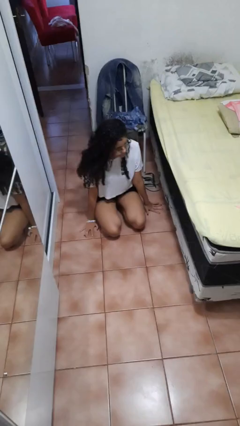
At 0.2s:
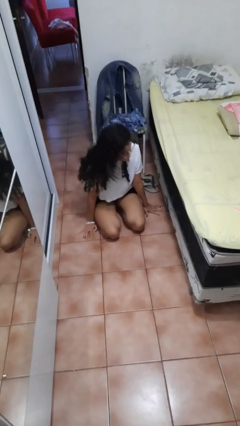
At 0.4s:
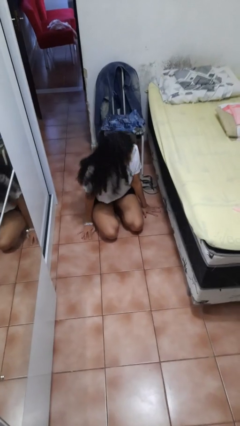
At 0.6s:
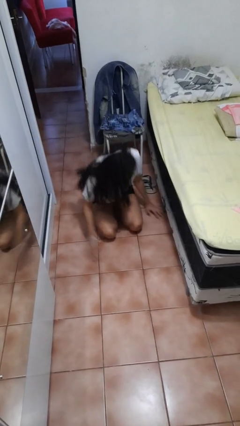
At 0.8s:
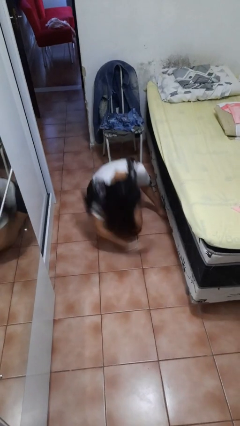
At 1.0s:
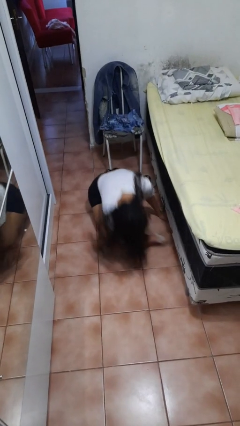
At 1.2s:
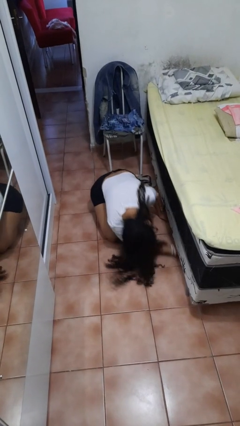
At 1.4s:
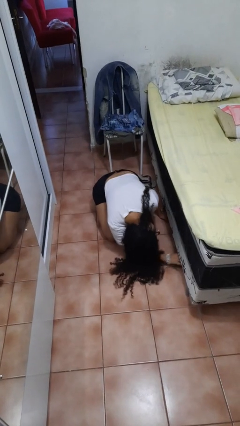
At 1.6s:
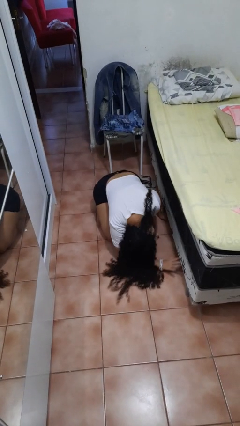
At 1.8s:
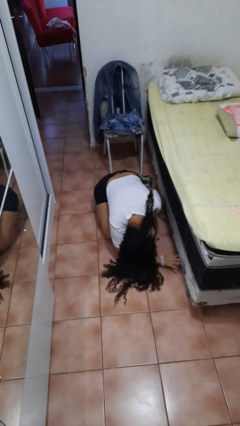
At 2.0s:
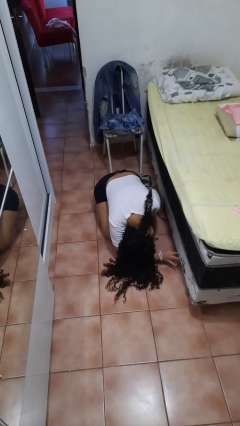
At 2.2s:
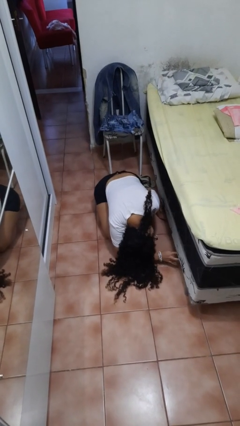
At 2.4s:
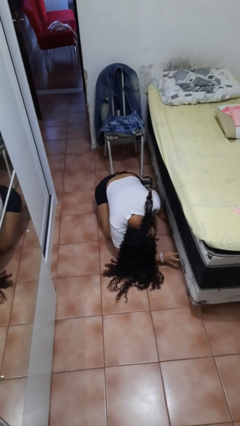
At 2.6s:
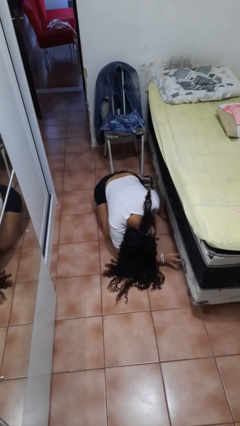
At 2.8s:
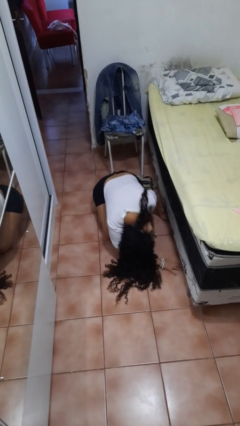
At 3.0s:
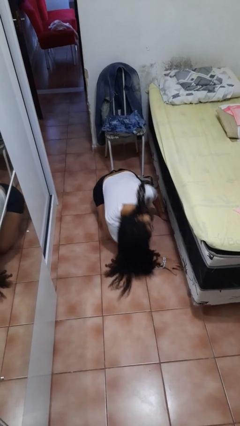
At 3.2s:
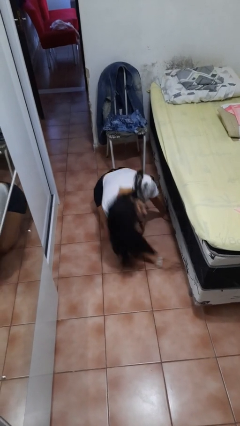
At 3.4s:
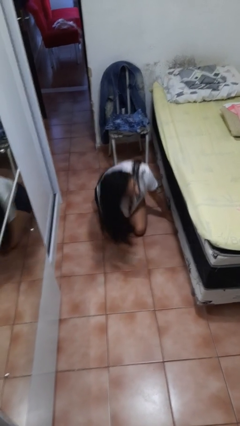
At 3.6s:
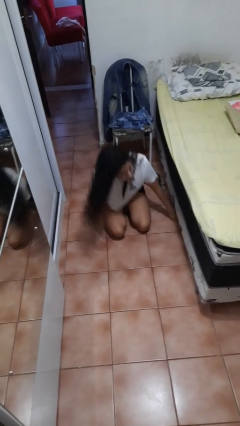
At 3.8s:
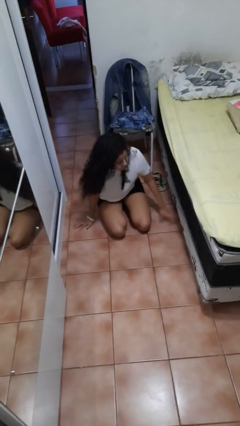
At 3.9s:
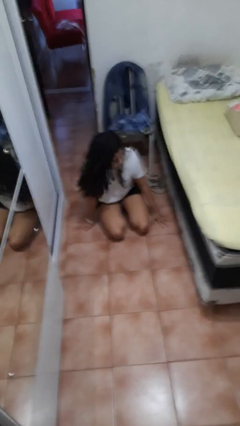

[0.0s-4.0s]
person searches under bed

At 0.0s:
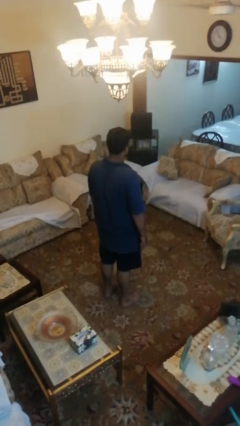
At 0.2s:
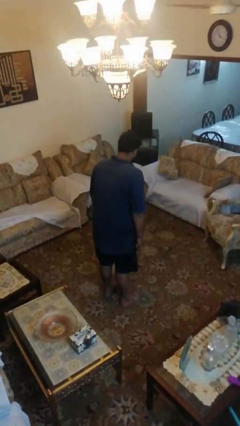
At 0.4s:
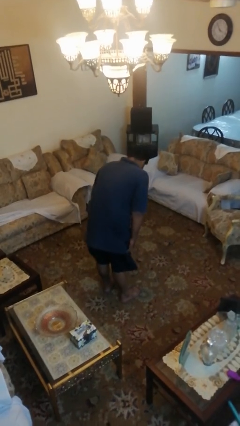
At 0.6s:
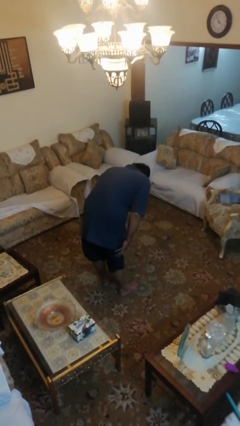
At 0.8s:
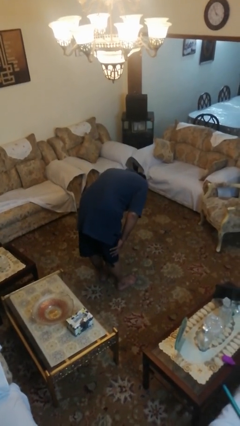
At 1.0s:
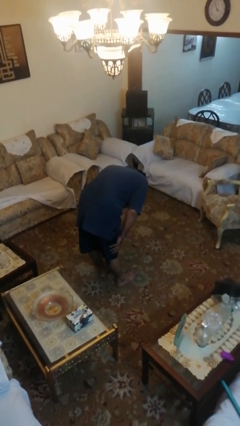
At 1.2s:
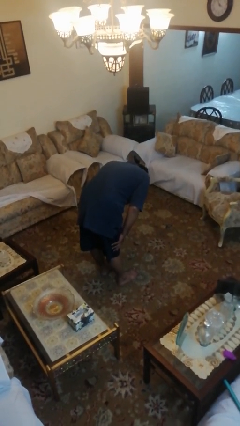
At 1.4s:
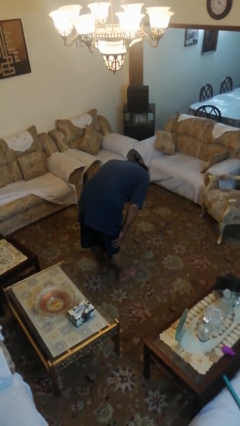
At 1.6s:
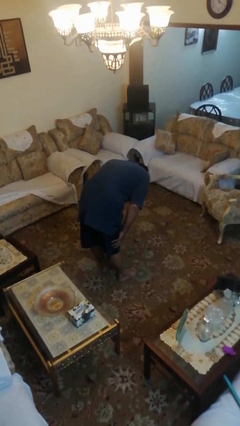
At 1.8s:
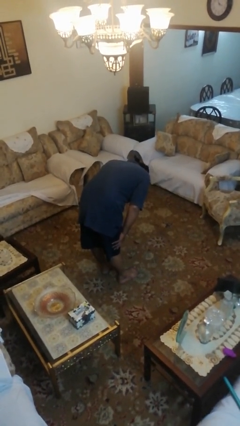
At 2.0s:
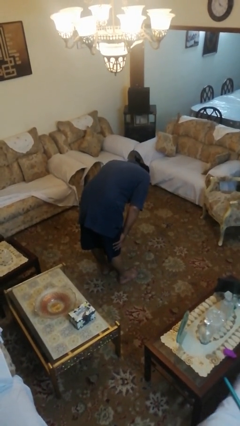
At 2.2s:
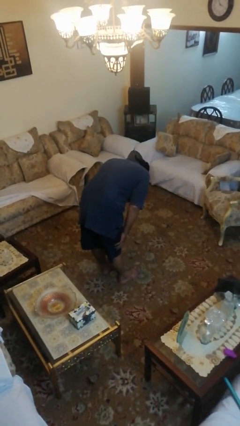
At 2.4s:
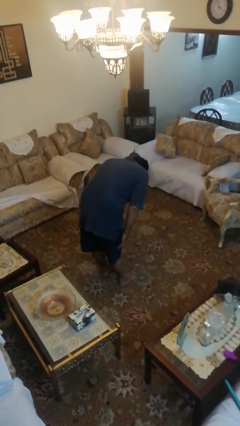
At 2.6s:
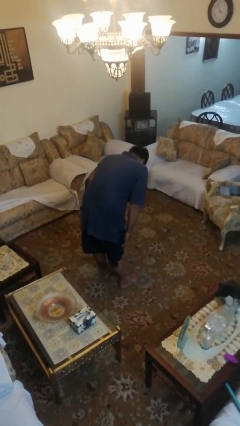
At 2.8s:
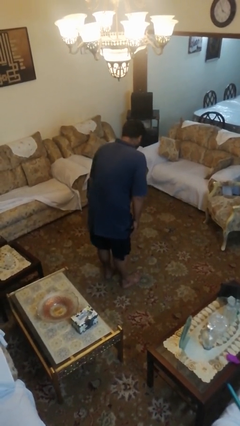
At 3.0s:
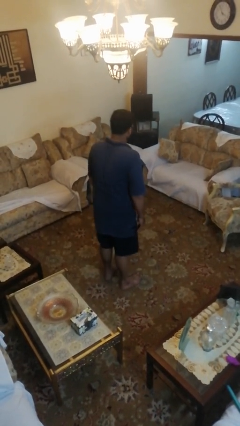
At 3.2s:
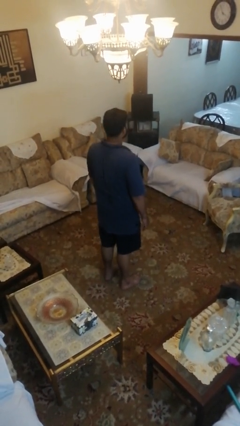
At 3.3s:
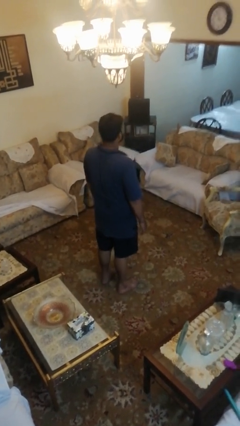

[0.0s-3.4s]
person bows

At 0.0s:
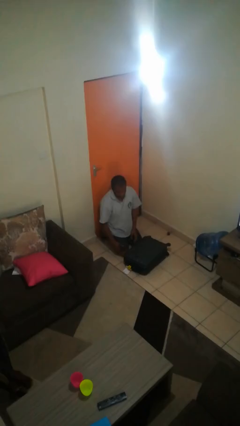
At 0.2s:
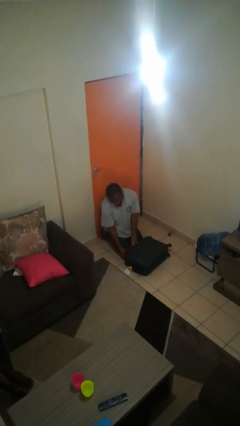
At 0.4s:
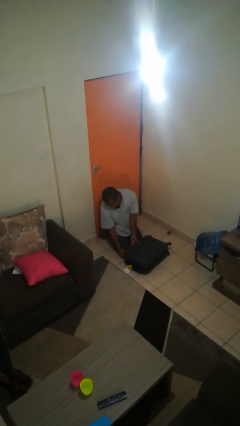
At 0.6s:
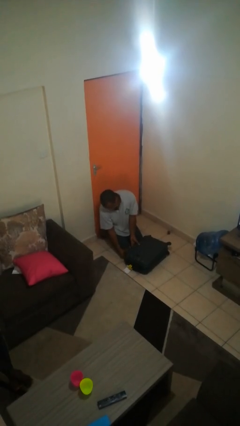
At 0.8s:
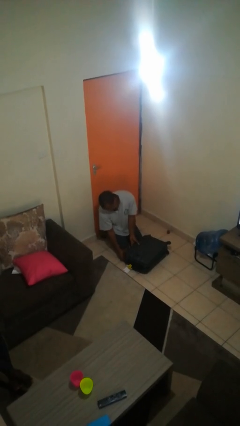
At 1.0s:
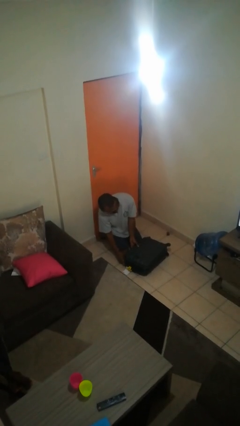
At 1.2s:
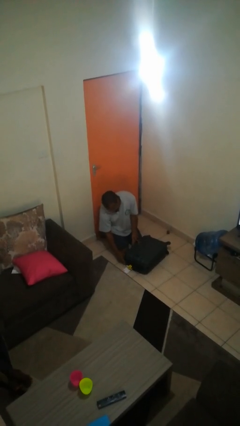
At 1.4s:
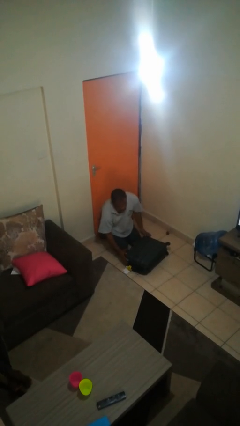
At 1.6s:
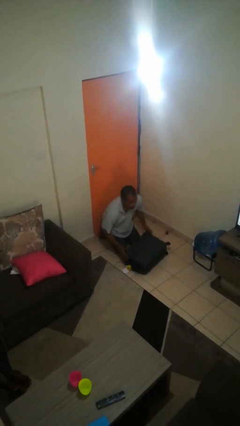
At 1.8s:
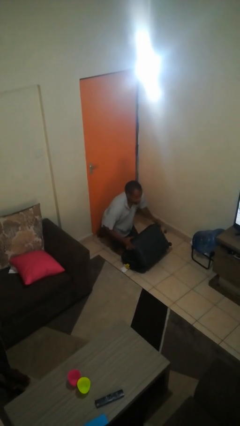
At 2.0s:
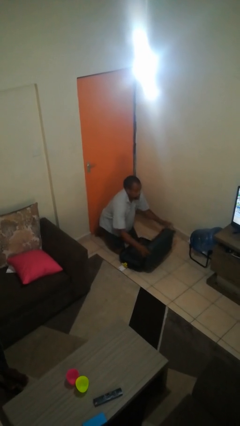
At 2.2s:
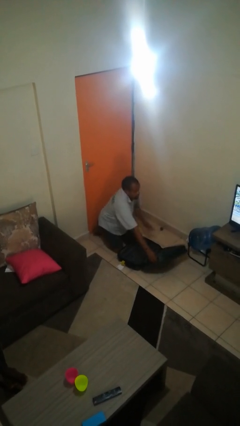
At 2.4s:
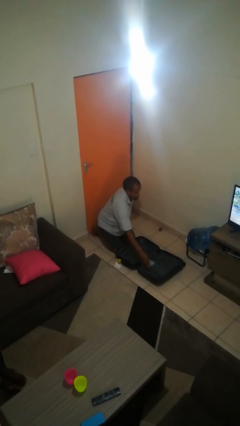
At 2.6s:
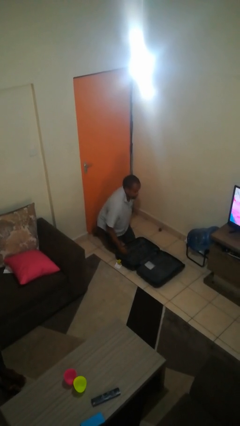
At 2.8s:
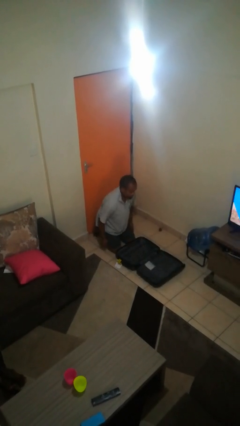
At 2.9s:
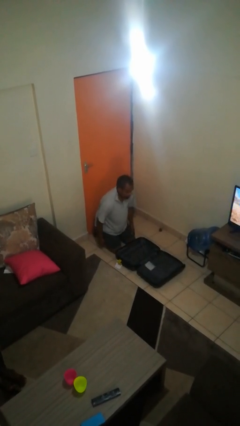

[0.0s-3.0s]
person opens suitcase

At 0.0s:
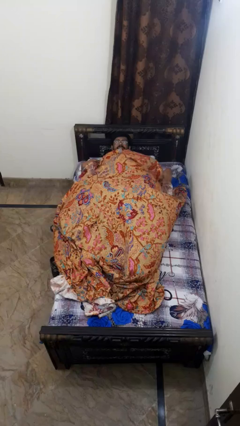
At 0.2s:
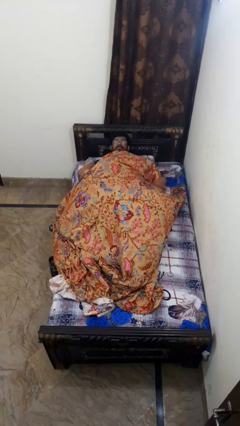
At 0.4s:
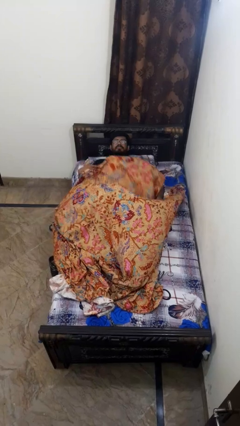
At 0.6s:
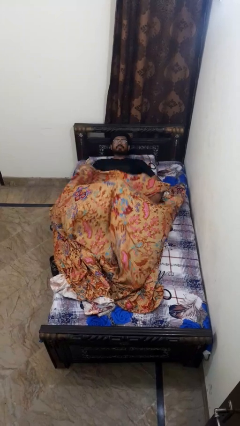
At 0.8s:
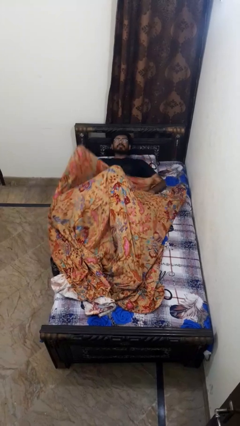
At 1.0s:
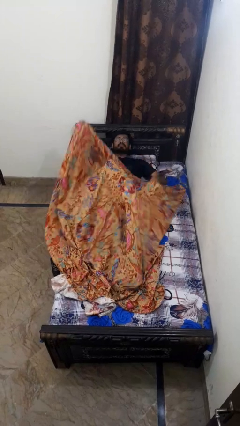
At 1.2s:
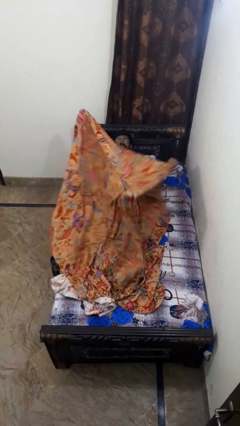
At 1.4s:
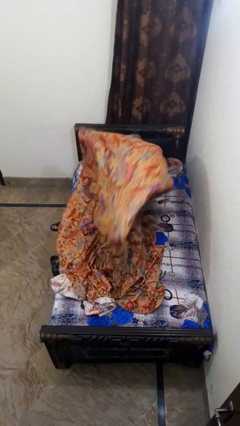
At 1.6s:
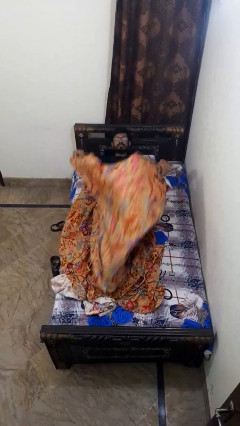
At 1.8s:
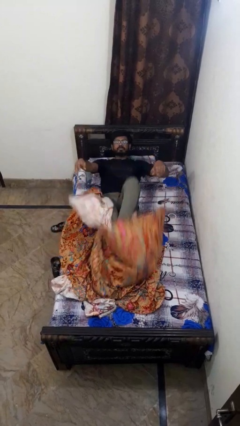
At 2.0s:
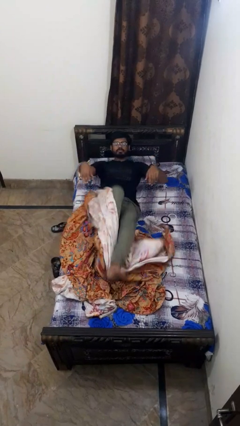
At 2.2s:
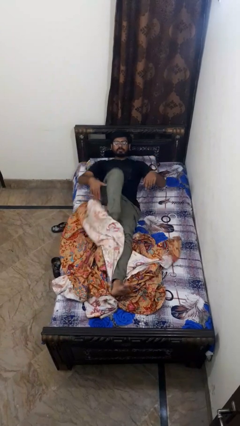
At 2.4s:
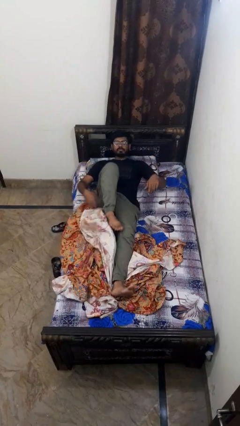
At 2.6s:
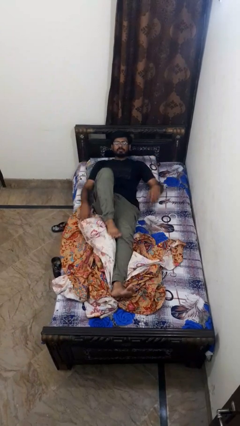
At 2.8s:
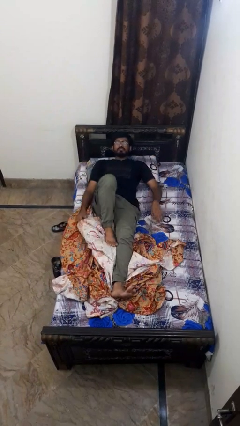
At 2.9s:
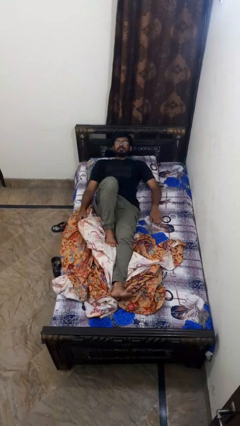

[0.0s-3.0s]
person uncovers with bedsheets

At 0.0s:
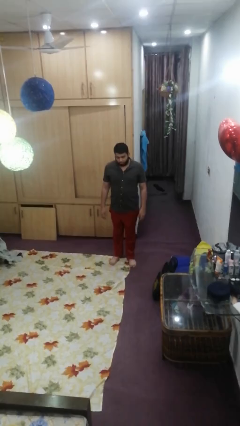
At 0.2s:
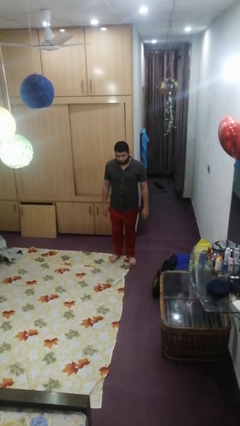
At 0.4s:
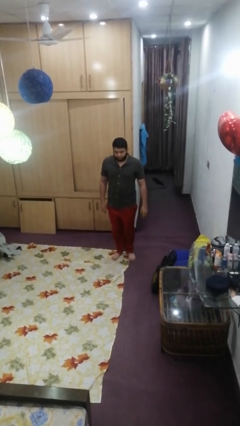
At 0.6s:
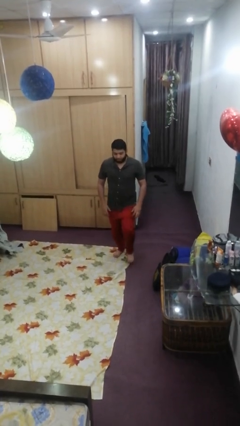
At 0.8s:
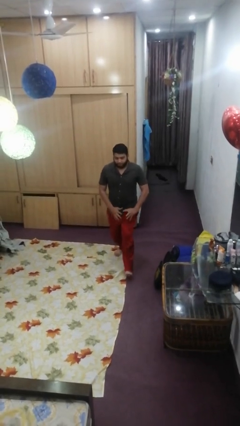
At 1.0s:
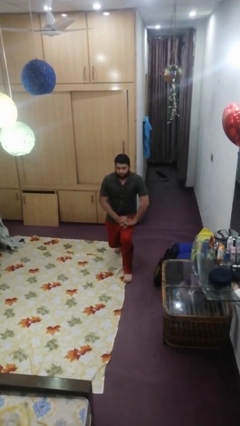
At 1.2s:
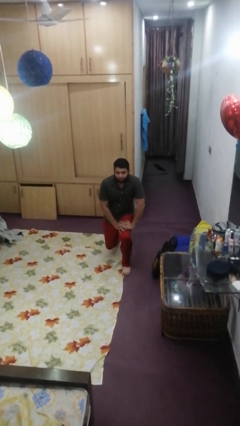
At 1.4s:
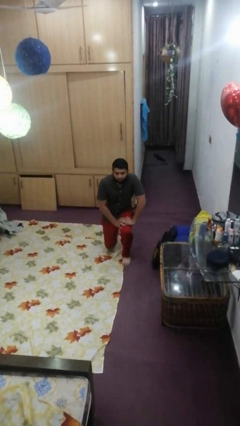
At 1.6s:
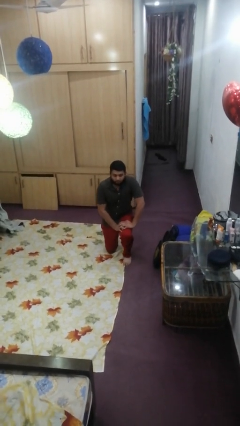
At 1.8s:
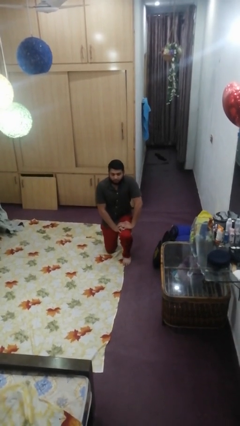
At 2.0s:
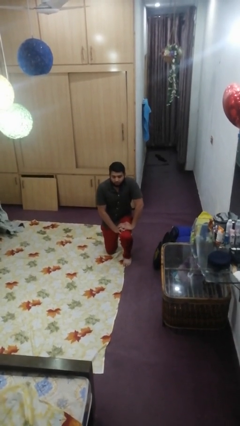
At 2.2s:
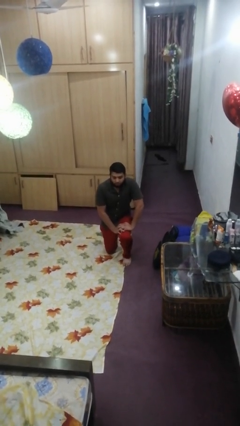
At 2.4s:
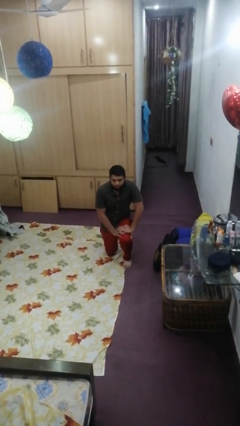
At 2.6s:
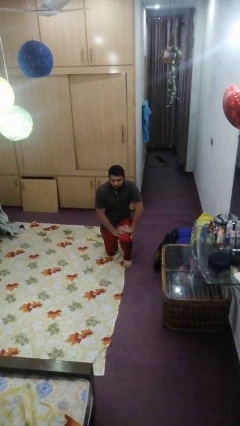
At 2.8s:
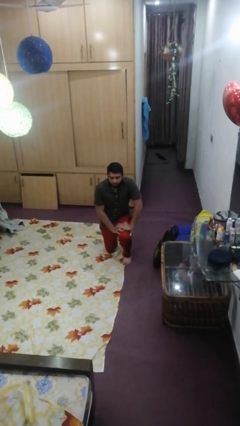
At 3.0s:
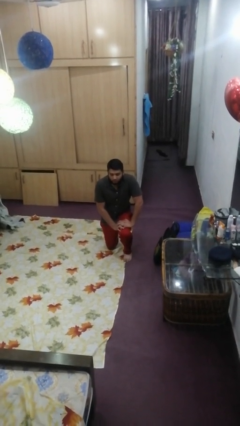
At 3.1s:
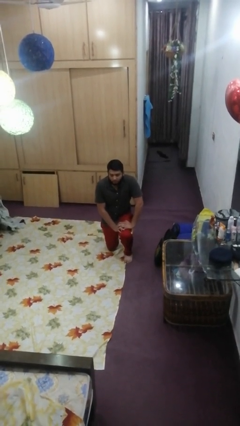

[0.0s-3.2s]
person kneels

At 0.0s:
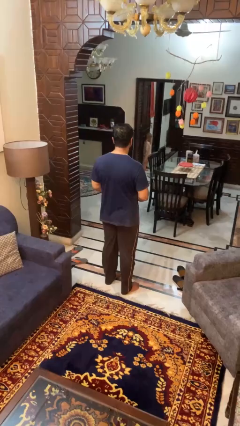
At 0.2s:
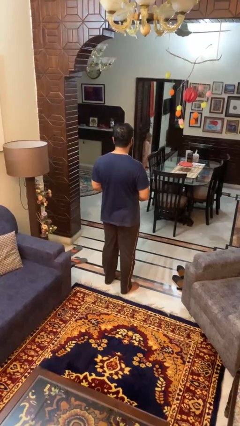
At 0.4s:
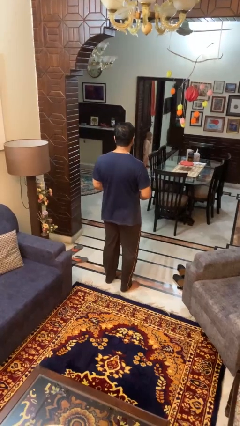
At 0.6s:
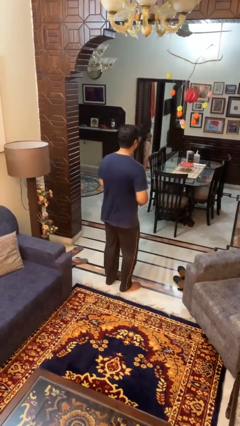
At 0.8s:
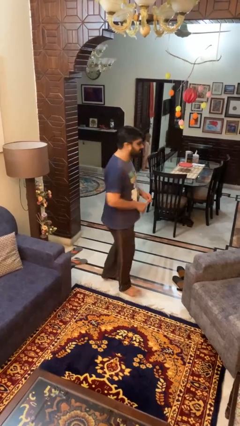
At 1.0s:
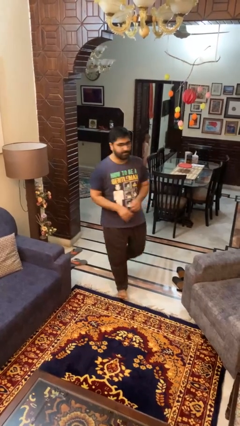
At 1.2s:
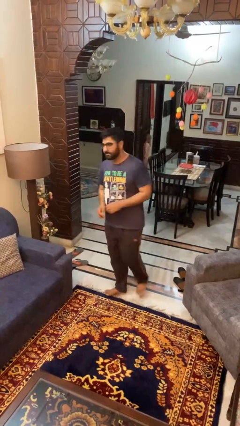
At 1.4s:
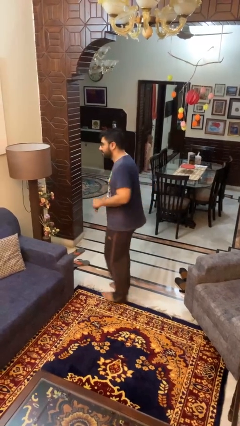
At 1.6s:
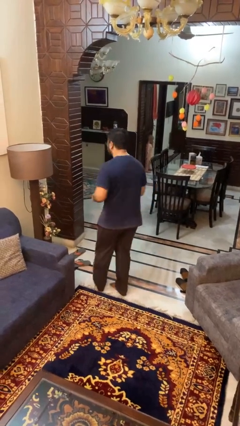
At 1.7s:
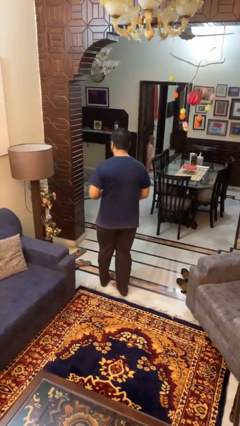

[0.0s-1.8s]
person twirls
